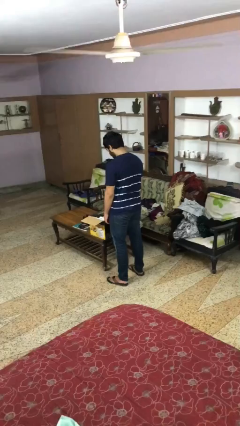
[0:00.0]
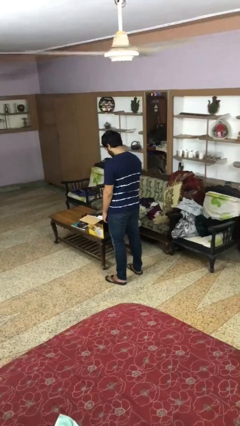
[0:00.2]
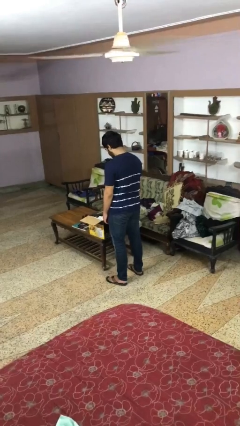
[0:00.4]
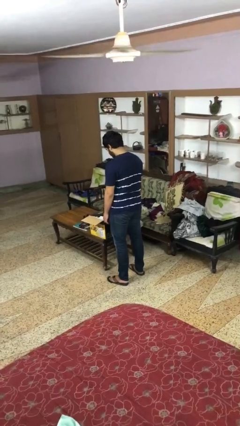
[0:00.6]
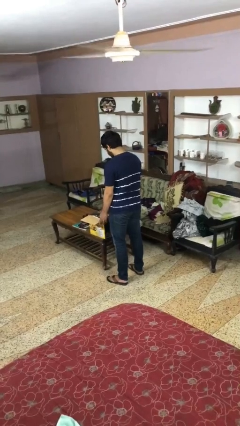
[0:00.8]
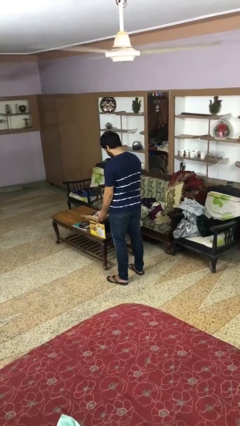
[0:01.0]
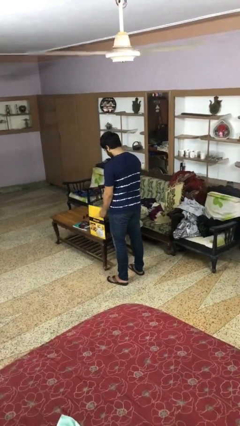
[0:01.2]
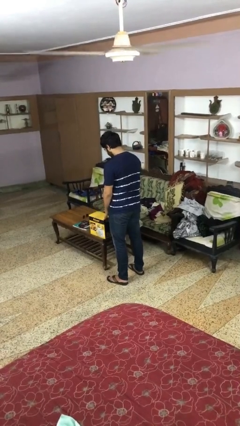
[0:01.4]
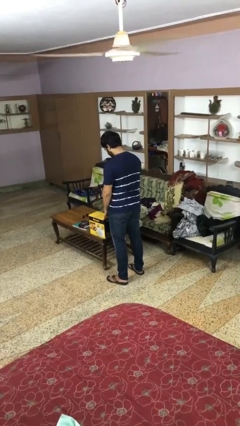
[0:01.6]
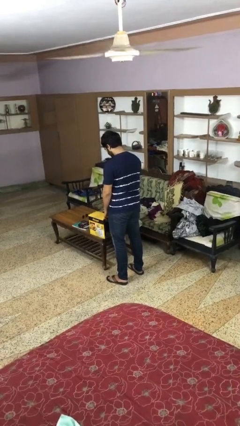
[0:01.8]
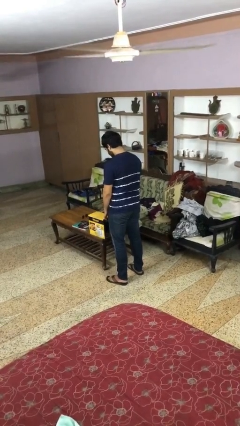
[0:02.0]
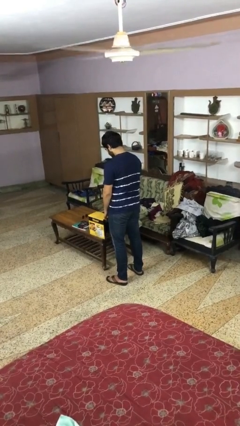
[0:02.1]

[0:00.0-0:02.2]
person closes box

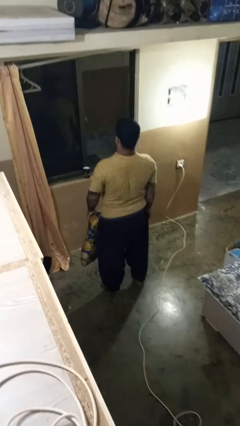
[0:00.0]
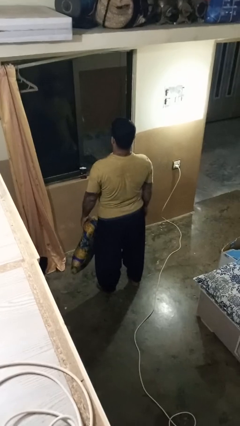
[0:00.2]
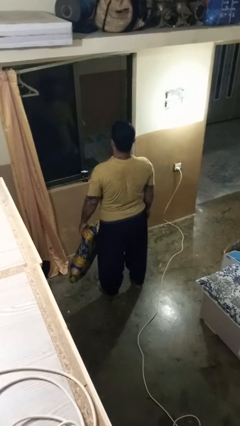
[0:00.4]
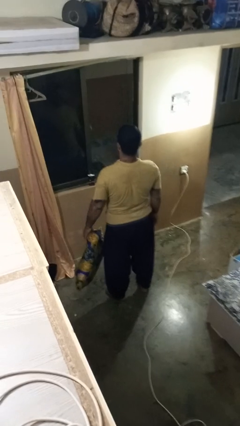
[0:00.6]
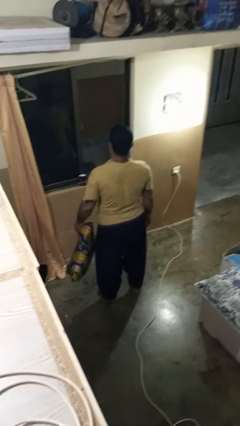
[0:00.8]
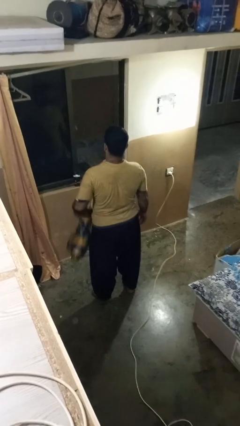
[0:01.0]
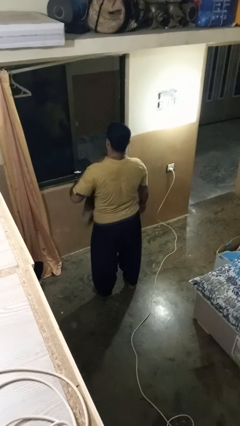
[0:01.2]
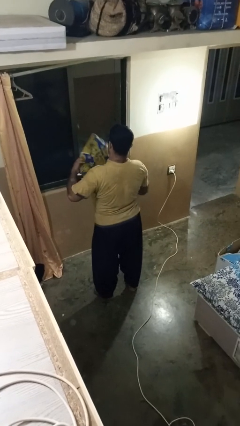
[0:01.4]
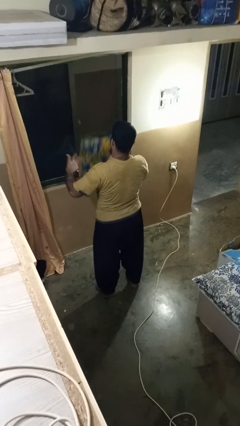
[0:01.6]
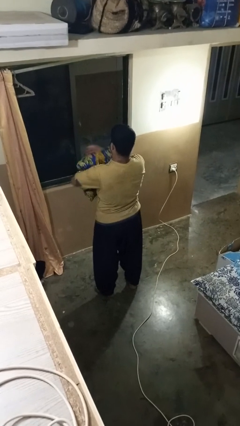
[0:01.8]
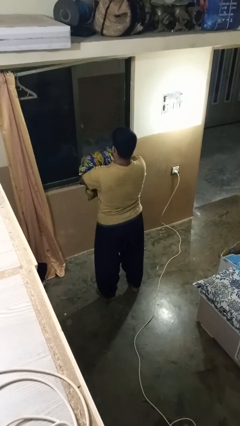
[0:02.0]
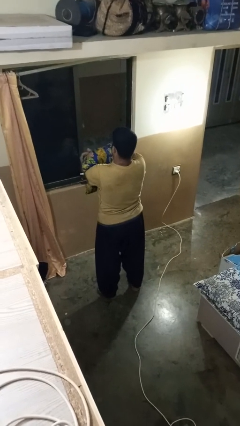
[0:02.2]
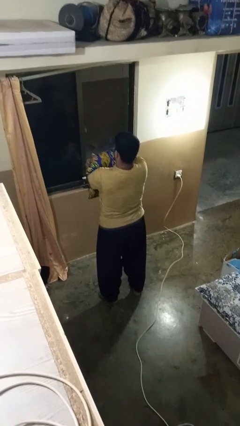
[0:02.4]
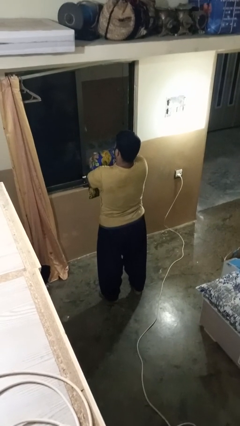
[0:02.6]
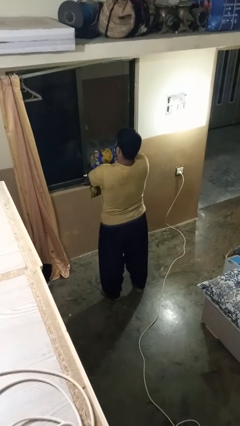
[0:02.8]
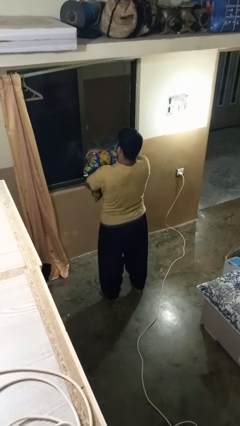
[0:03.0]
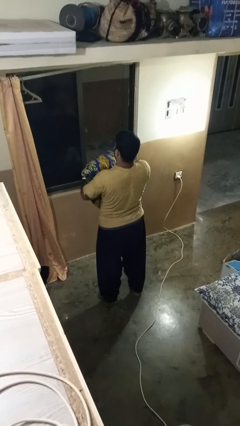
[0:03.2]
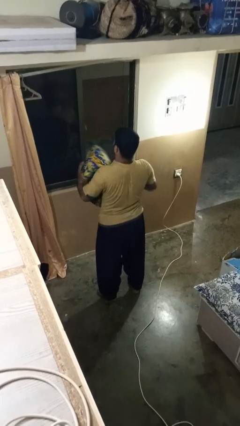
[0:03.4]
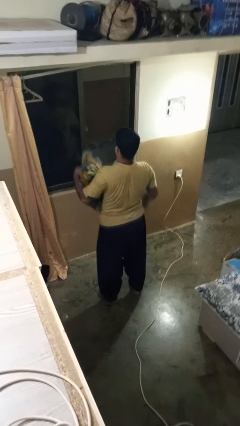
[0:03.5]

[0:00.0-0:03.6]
person squeezes object

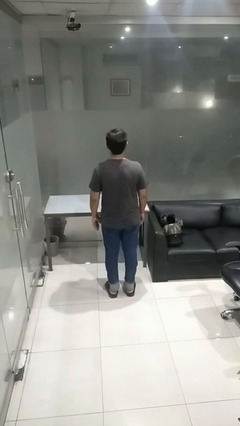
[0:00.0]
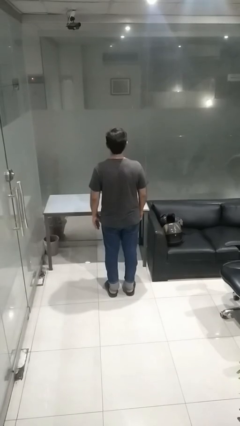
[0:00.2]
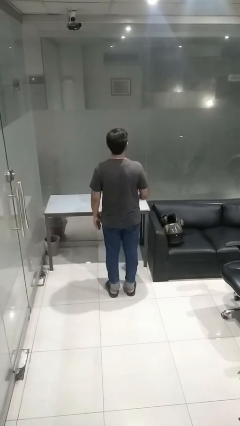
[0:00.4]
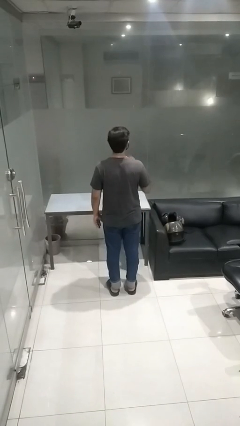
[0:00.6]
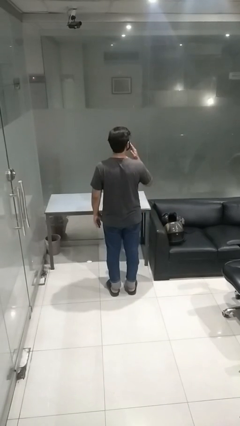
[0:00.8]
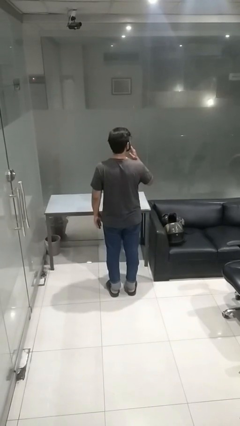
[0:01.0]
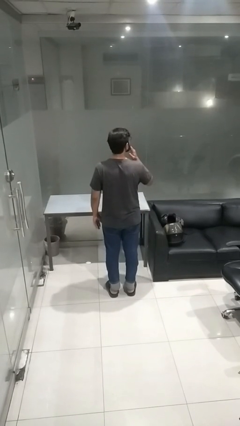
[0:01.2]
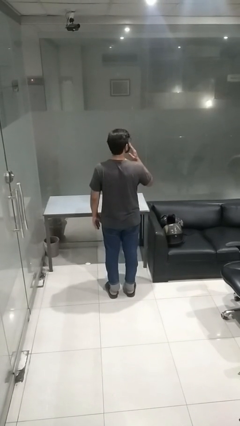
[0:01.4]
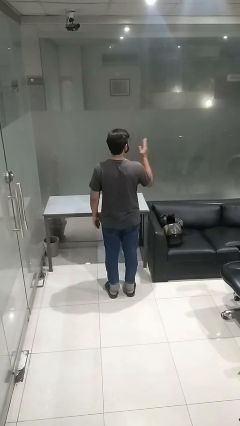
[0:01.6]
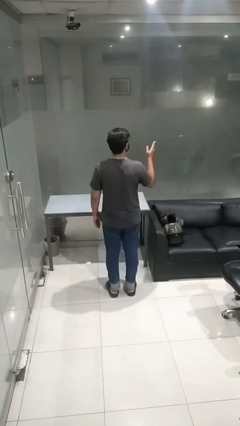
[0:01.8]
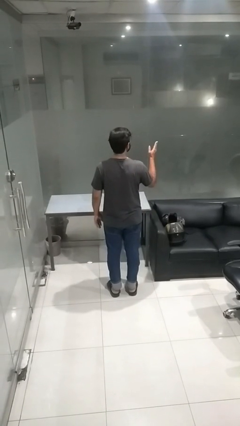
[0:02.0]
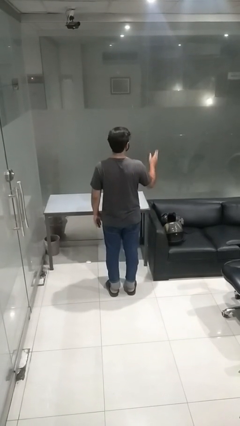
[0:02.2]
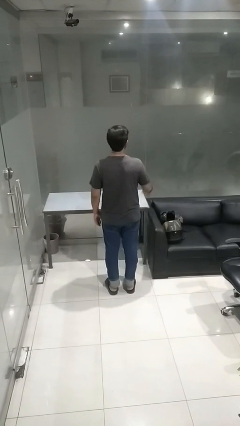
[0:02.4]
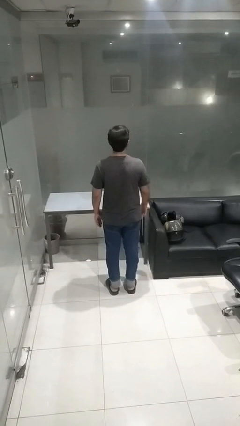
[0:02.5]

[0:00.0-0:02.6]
person gestures blow kiss

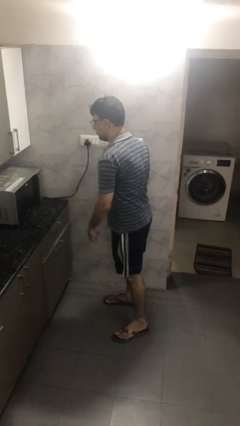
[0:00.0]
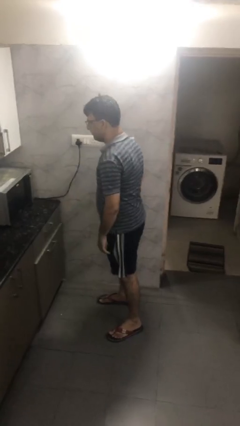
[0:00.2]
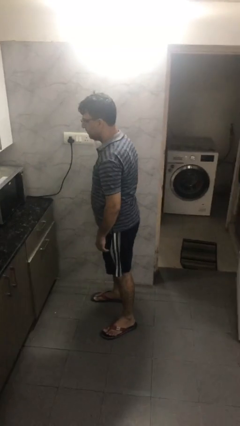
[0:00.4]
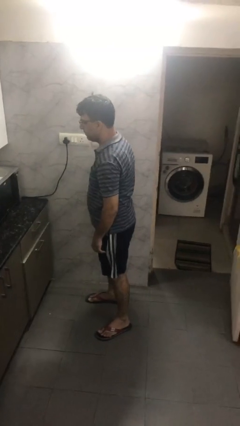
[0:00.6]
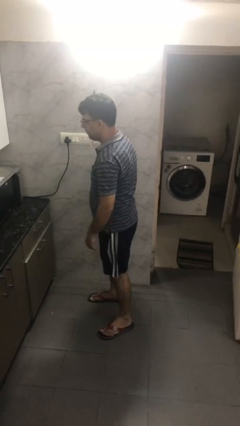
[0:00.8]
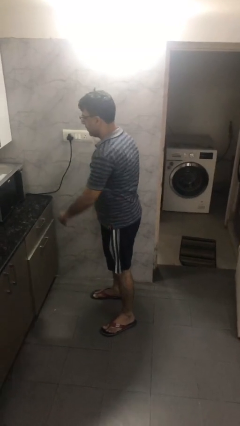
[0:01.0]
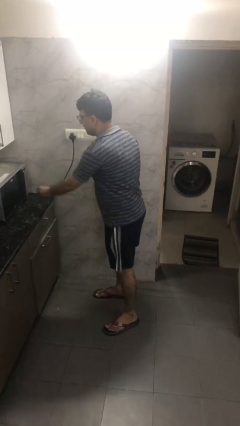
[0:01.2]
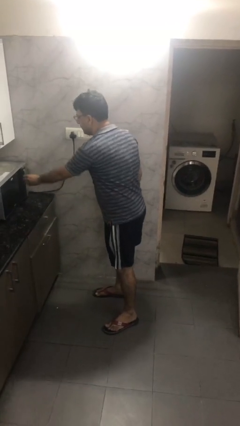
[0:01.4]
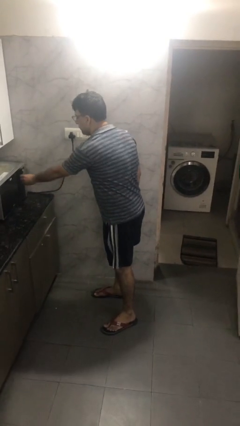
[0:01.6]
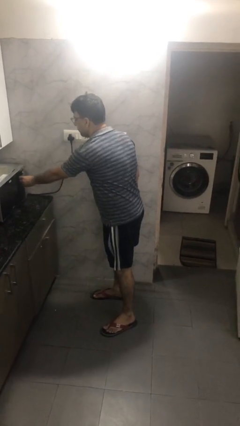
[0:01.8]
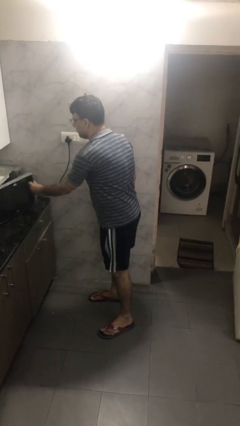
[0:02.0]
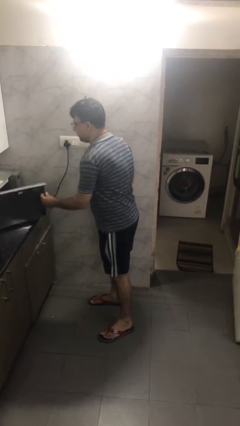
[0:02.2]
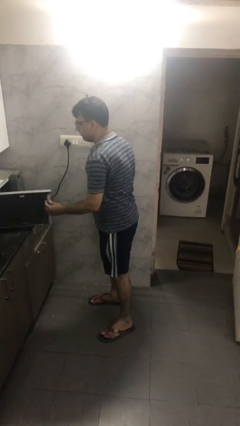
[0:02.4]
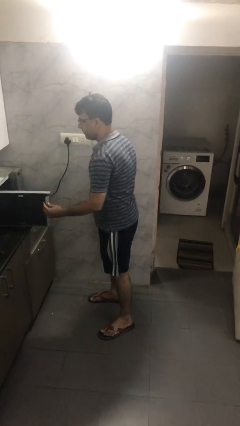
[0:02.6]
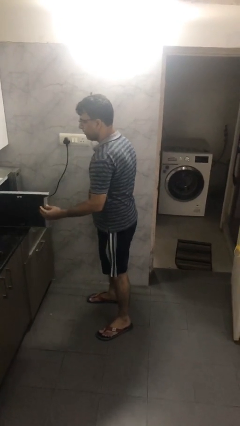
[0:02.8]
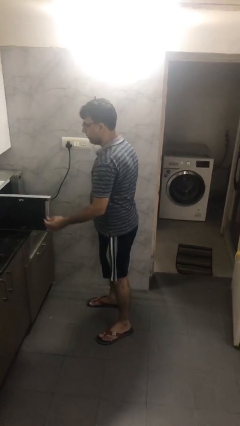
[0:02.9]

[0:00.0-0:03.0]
person opens microwave

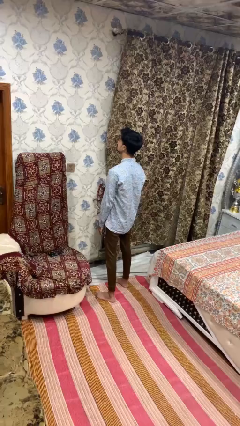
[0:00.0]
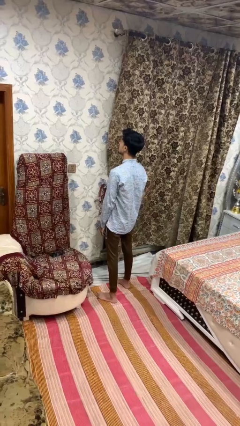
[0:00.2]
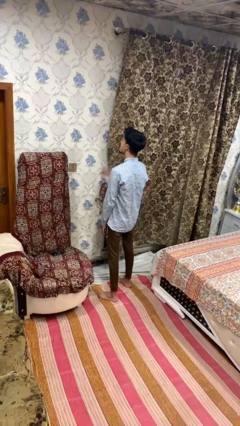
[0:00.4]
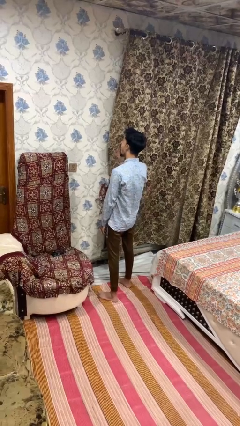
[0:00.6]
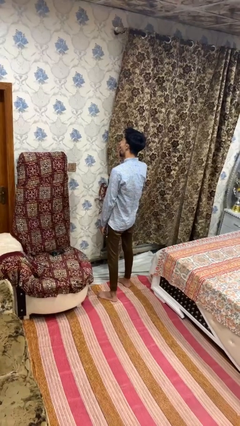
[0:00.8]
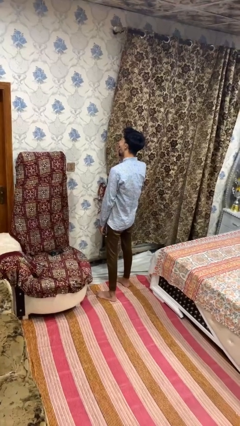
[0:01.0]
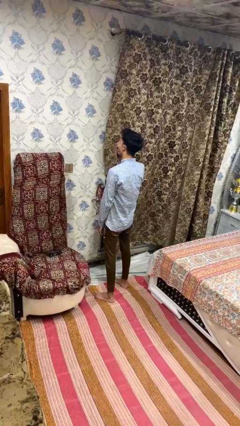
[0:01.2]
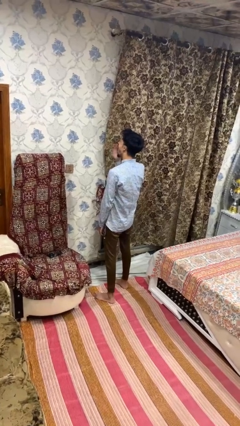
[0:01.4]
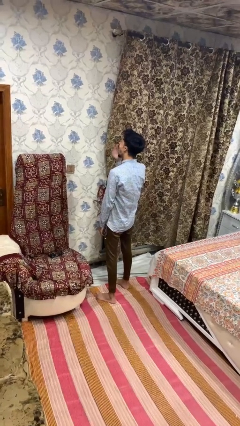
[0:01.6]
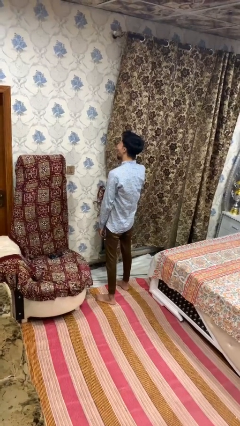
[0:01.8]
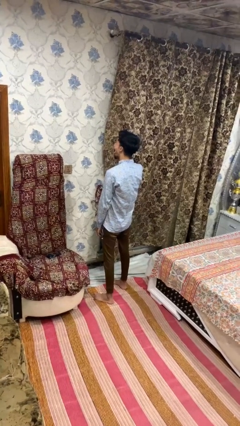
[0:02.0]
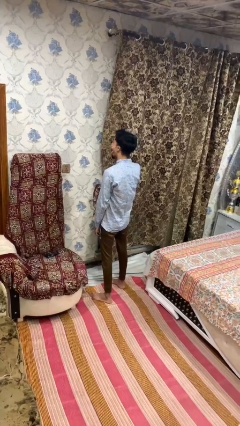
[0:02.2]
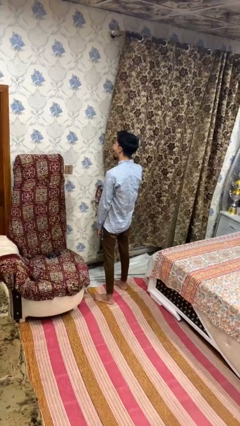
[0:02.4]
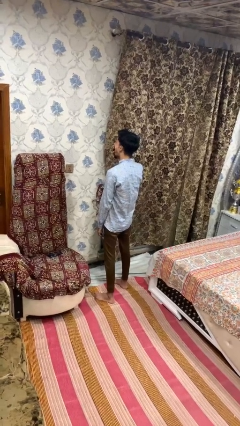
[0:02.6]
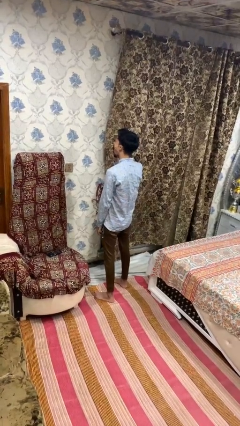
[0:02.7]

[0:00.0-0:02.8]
person yawns

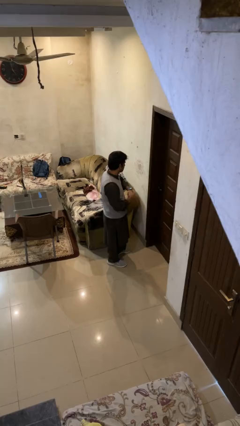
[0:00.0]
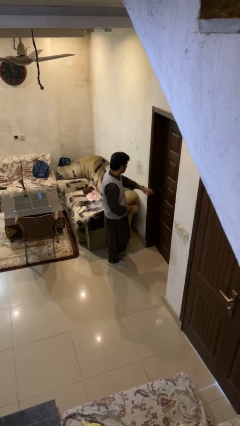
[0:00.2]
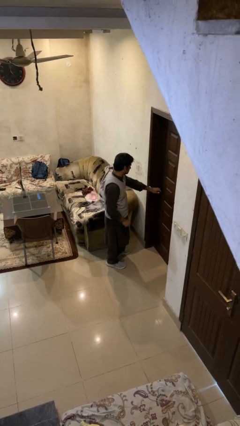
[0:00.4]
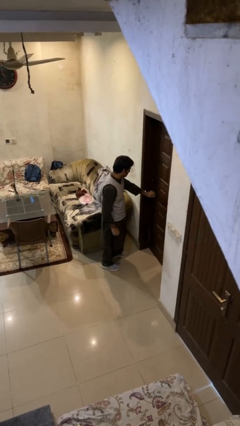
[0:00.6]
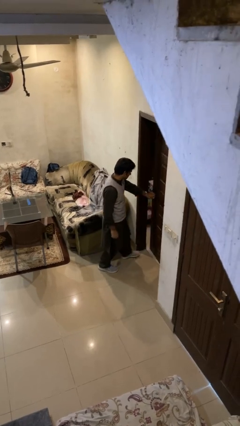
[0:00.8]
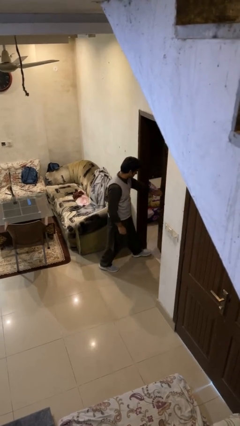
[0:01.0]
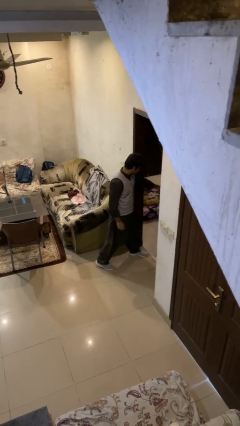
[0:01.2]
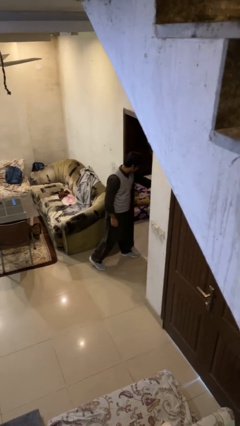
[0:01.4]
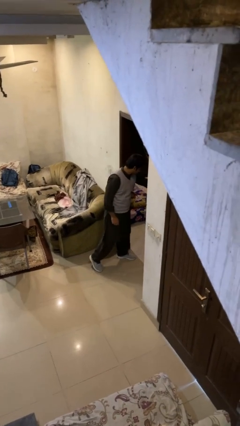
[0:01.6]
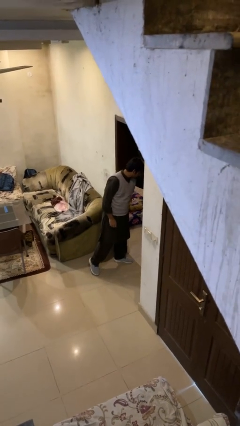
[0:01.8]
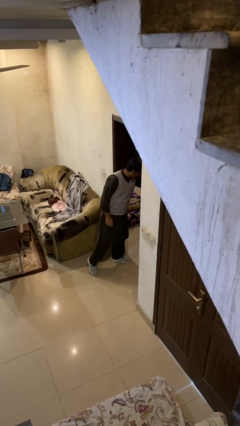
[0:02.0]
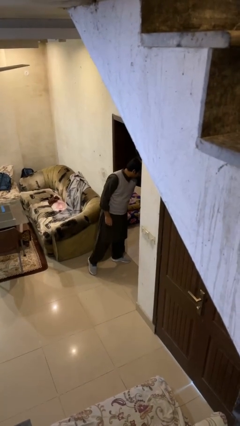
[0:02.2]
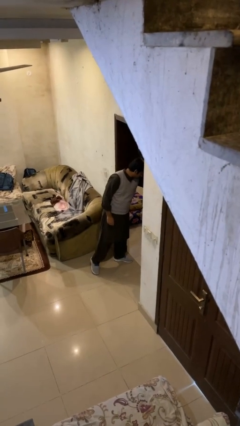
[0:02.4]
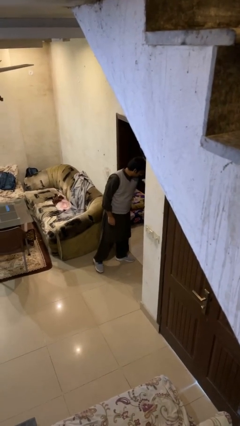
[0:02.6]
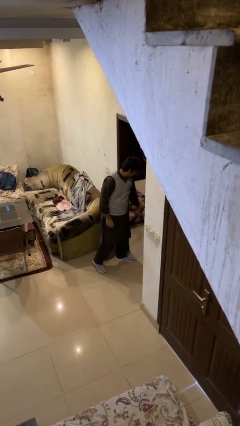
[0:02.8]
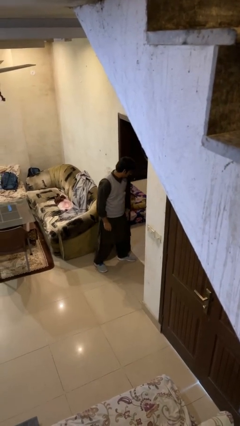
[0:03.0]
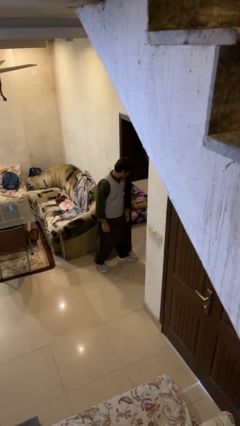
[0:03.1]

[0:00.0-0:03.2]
person opens facility door
